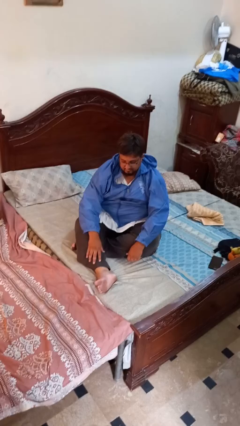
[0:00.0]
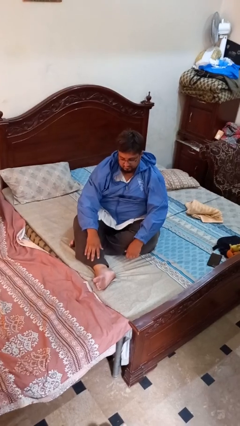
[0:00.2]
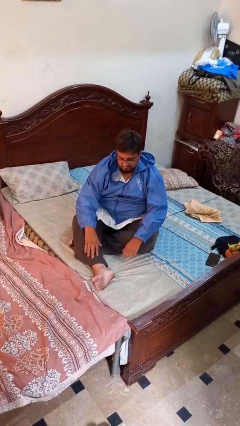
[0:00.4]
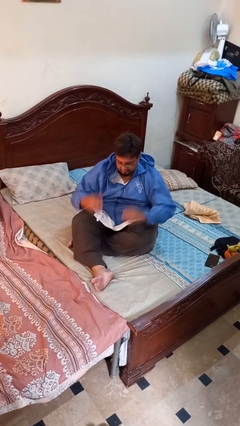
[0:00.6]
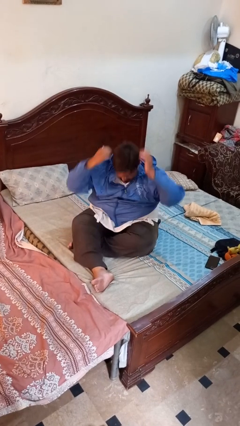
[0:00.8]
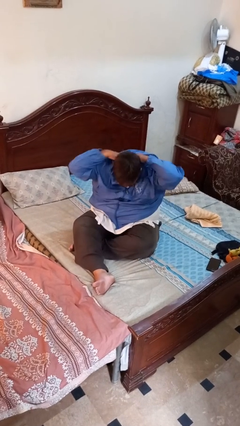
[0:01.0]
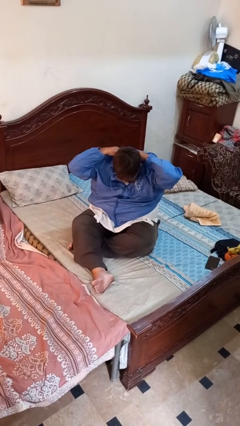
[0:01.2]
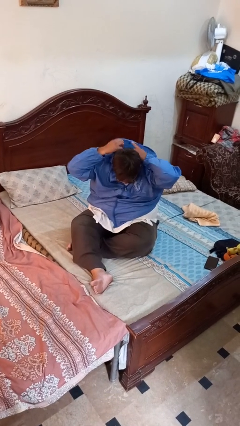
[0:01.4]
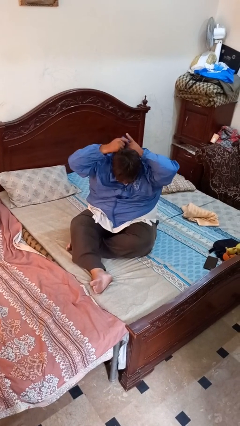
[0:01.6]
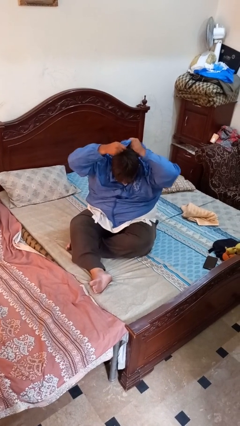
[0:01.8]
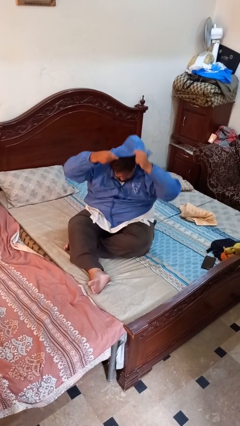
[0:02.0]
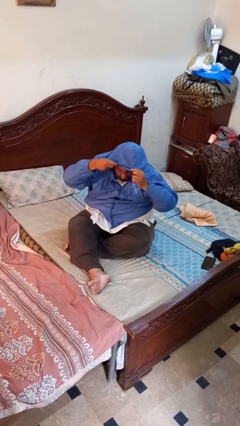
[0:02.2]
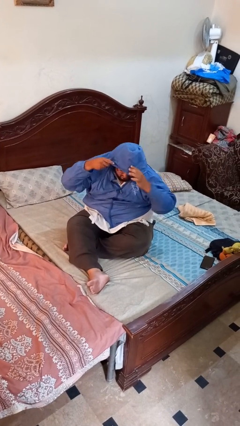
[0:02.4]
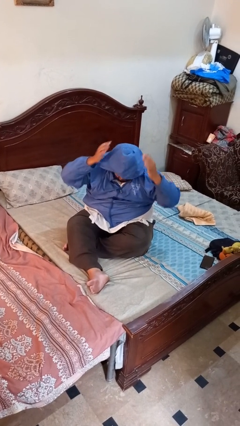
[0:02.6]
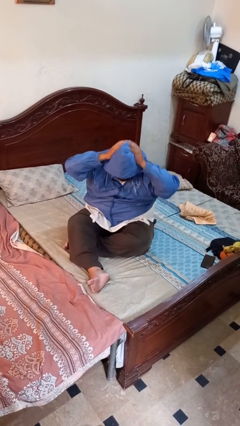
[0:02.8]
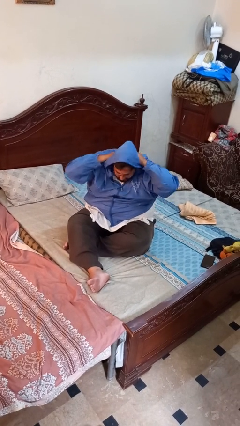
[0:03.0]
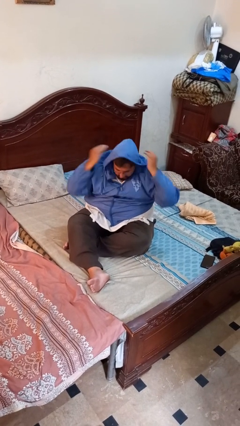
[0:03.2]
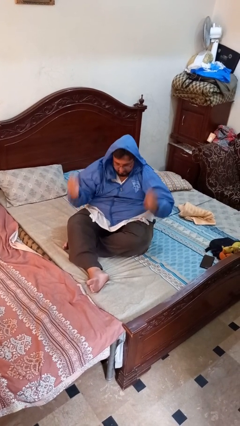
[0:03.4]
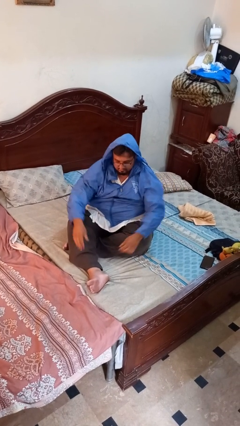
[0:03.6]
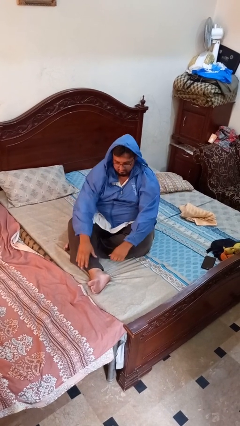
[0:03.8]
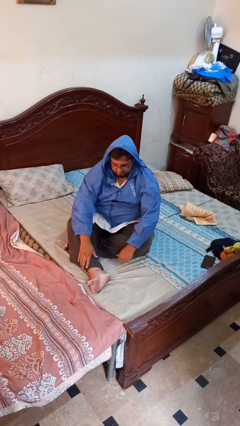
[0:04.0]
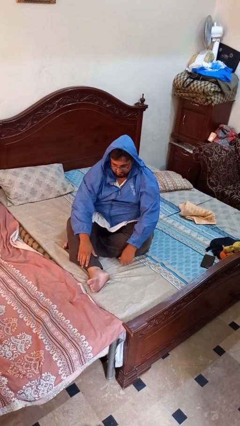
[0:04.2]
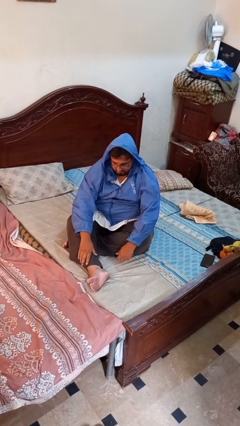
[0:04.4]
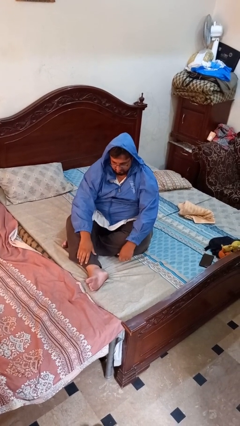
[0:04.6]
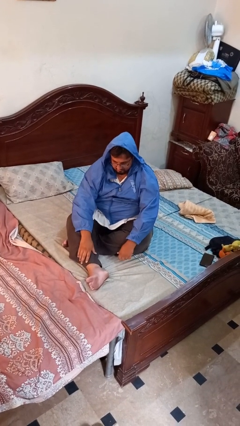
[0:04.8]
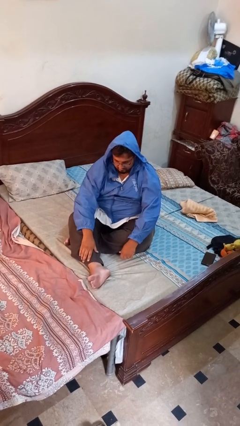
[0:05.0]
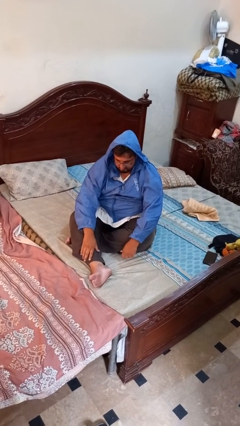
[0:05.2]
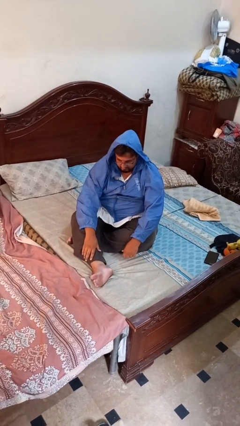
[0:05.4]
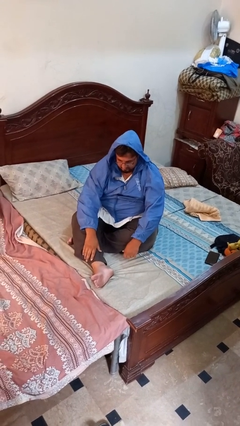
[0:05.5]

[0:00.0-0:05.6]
person puts on hoodie

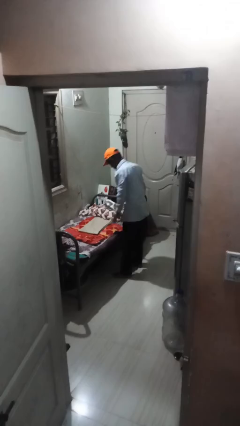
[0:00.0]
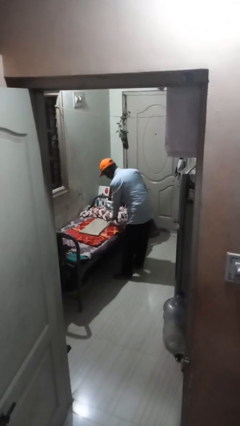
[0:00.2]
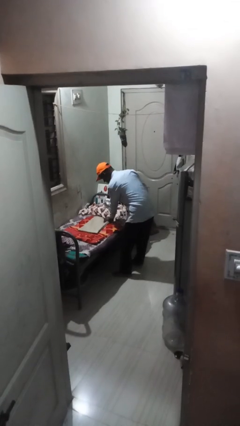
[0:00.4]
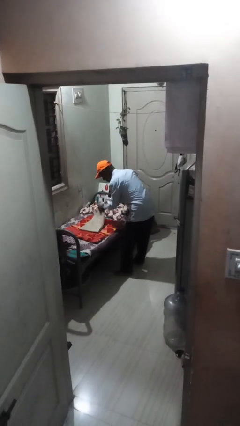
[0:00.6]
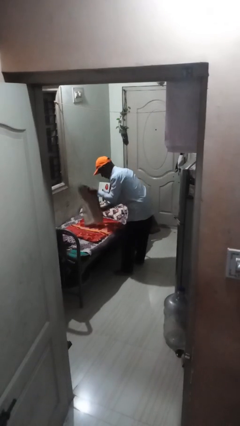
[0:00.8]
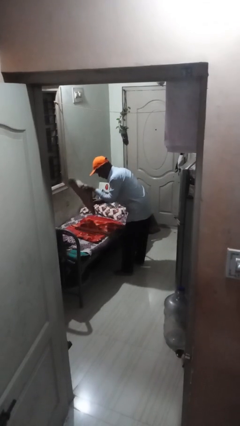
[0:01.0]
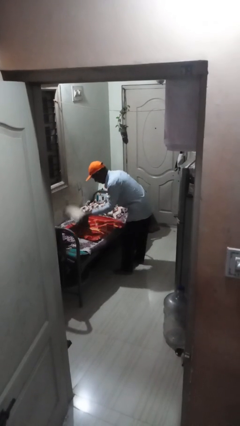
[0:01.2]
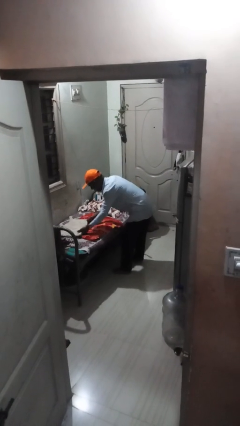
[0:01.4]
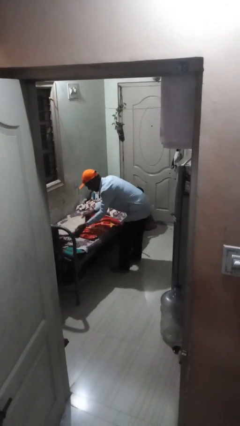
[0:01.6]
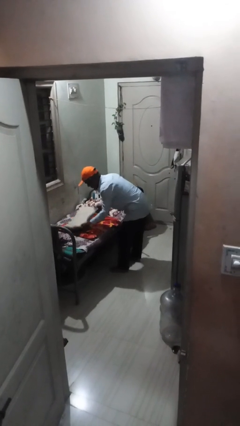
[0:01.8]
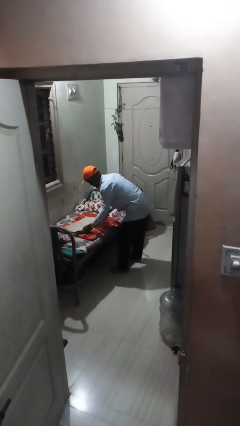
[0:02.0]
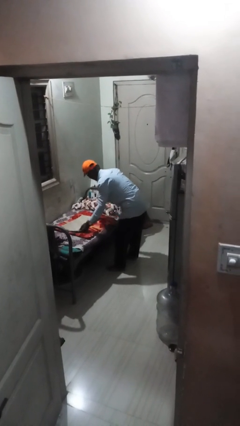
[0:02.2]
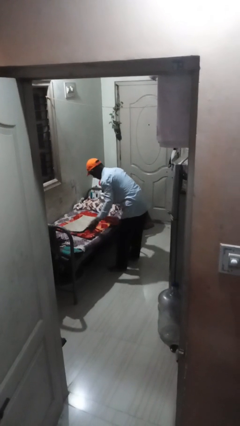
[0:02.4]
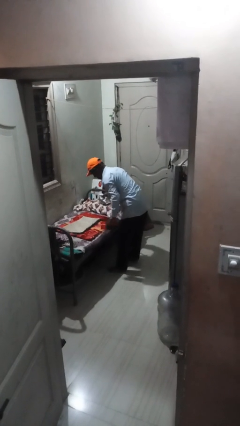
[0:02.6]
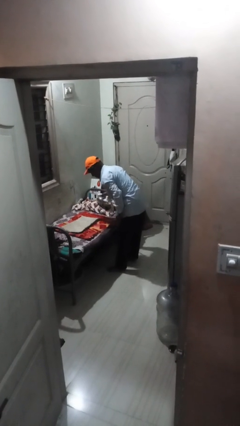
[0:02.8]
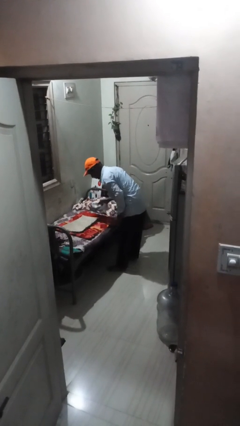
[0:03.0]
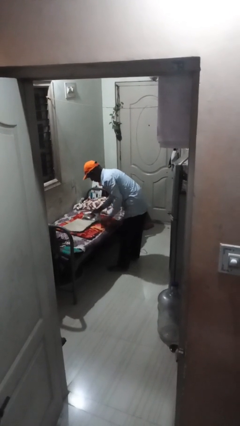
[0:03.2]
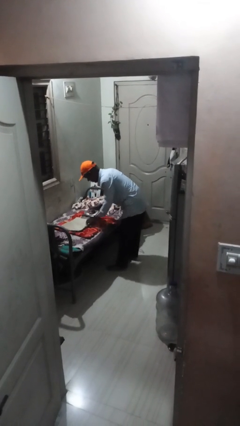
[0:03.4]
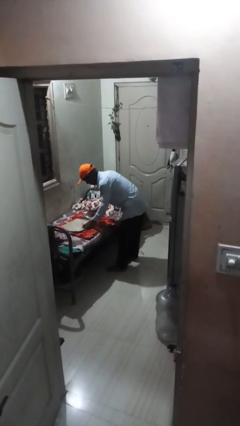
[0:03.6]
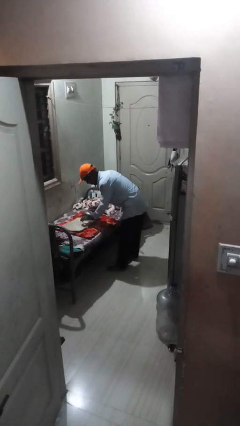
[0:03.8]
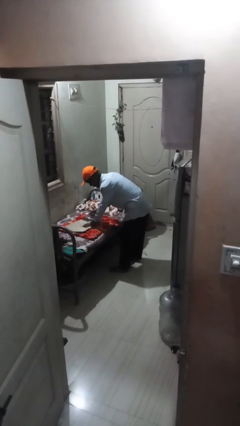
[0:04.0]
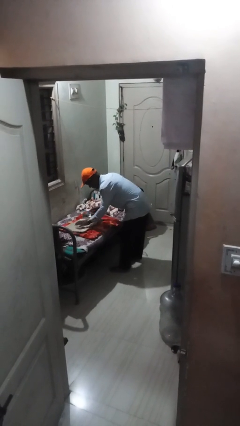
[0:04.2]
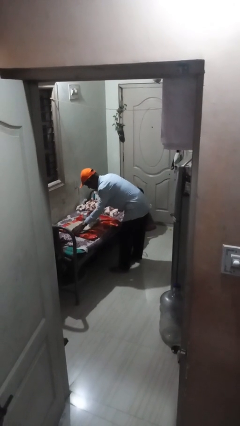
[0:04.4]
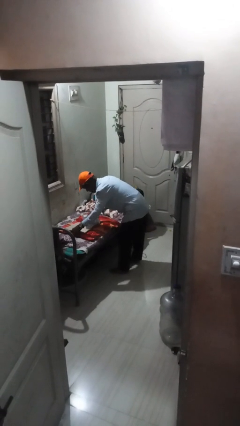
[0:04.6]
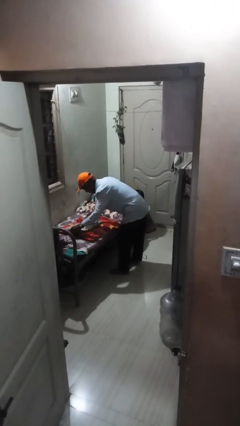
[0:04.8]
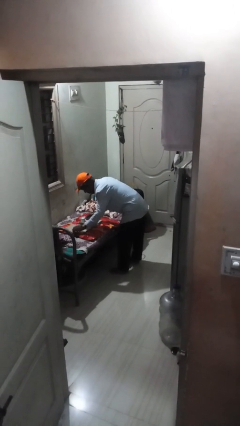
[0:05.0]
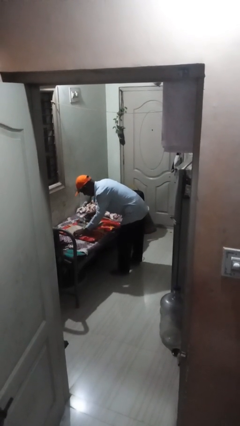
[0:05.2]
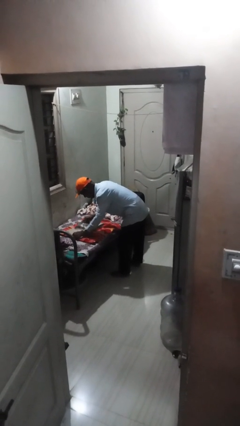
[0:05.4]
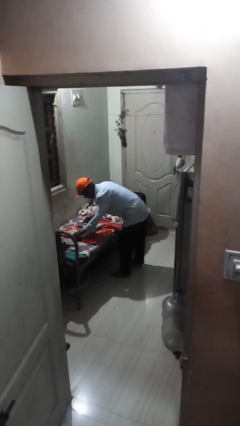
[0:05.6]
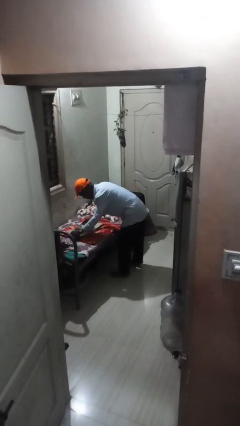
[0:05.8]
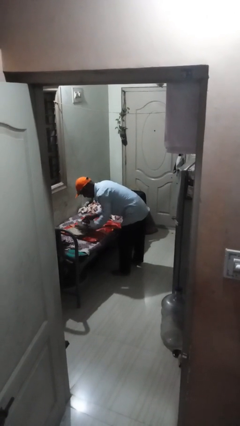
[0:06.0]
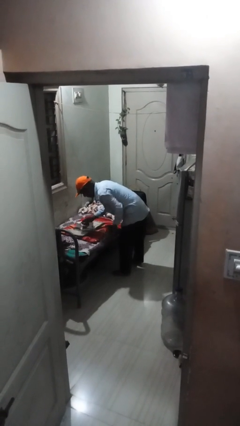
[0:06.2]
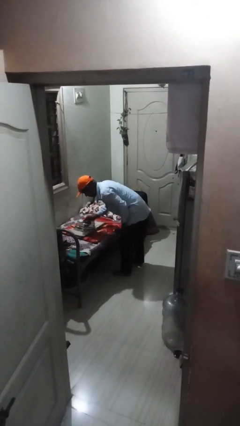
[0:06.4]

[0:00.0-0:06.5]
person irons clothes

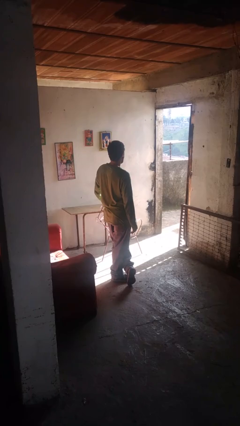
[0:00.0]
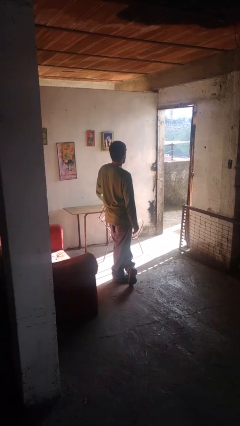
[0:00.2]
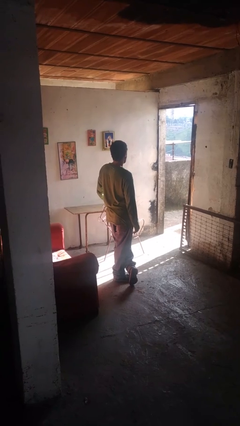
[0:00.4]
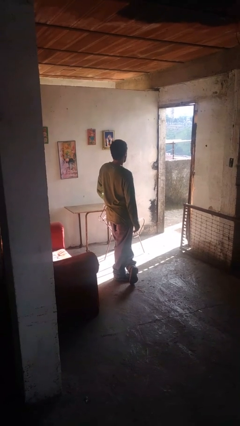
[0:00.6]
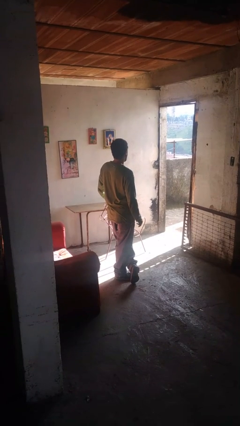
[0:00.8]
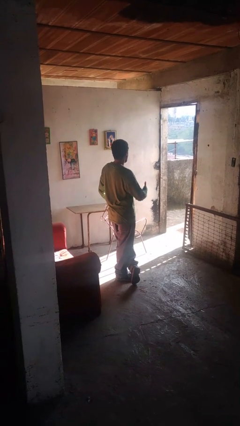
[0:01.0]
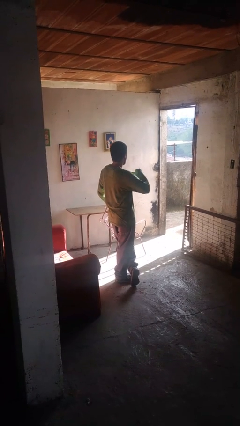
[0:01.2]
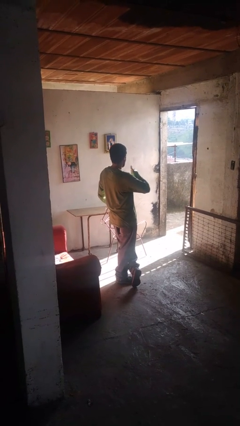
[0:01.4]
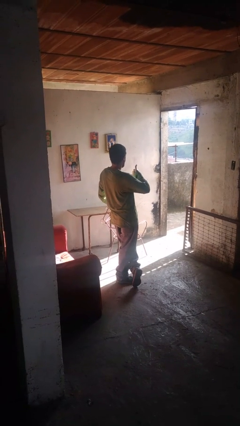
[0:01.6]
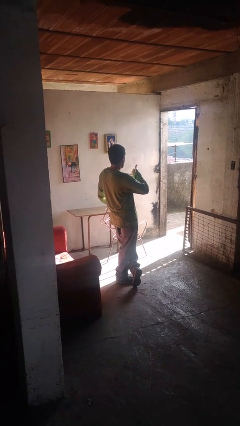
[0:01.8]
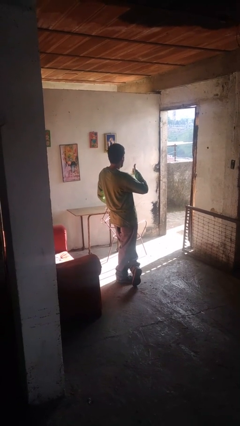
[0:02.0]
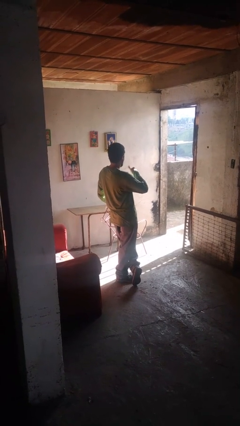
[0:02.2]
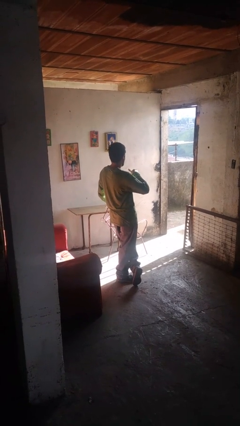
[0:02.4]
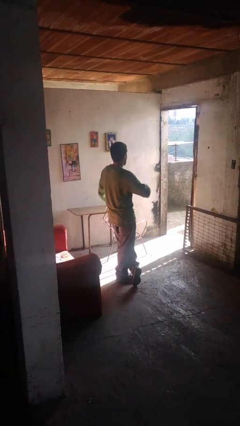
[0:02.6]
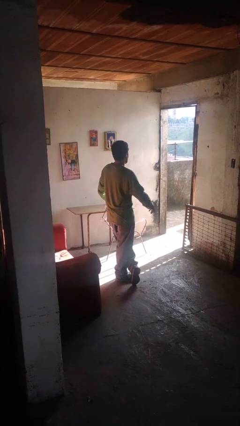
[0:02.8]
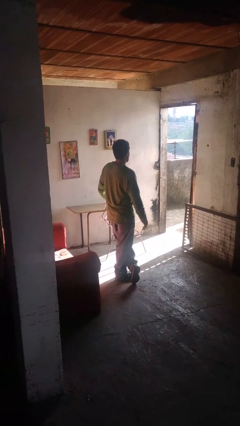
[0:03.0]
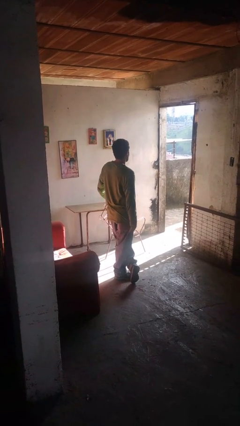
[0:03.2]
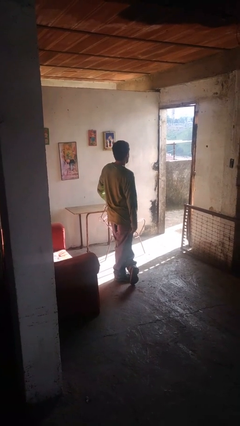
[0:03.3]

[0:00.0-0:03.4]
person gestures hang loose

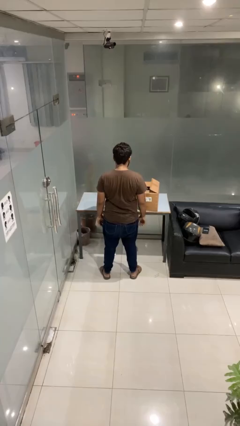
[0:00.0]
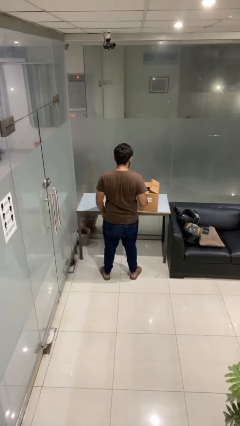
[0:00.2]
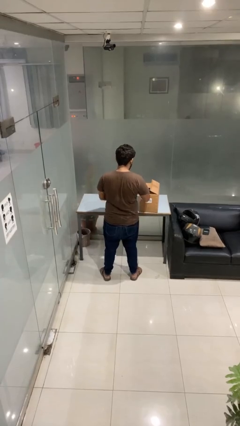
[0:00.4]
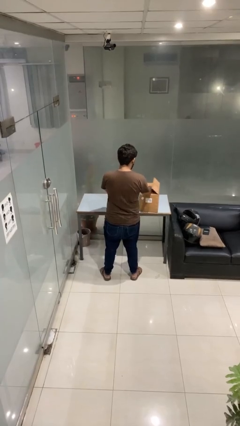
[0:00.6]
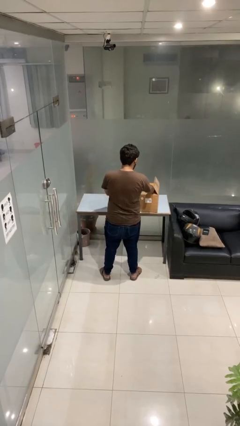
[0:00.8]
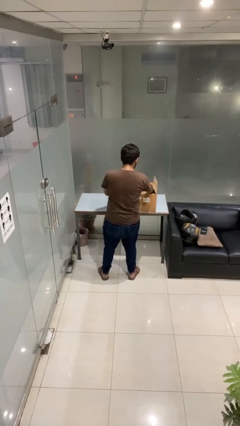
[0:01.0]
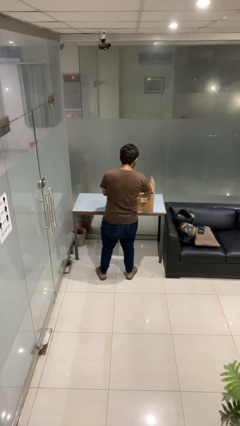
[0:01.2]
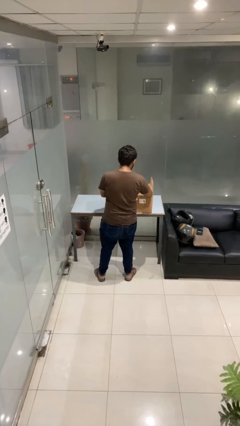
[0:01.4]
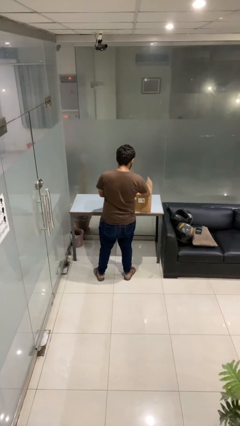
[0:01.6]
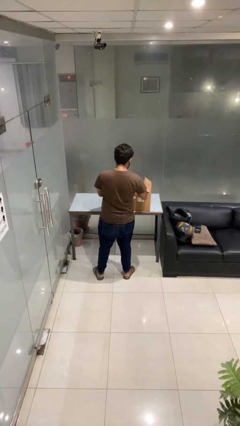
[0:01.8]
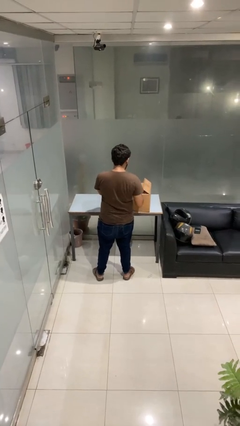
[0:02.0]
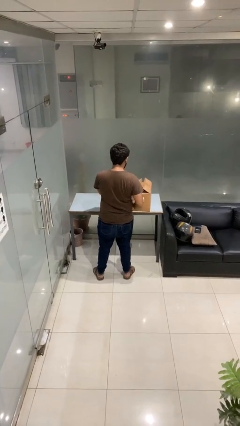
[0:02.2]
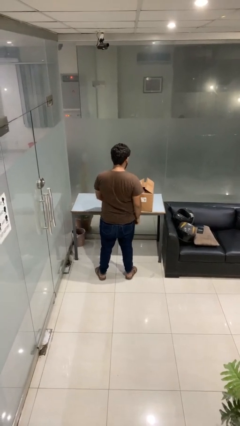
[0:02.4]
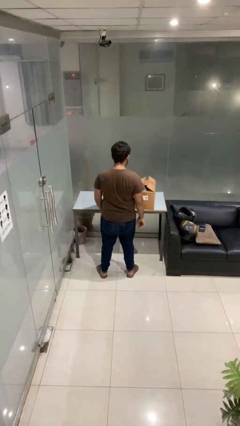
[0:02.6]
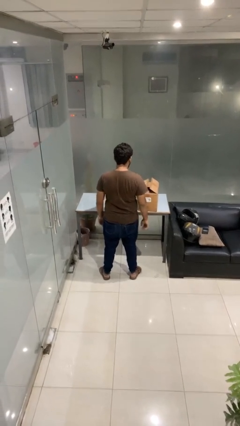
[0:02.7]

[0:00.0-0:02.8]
person searches in box
